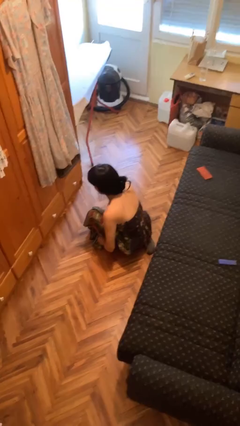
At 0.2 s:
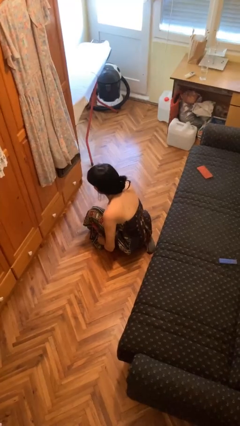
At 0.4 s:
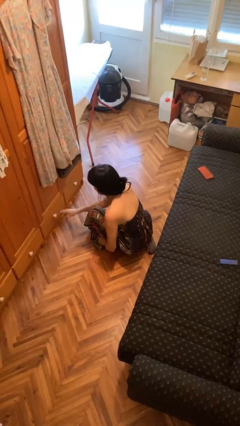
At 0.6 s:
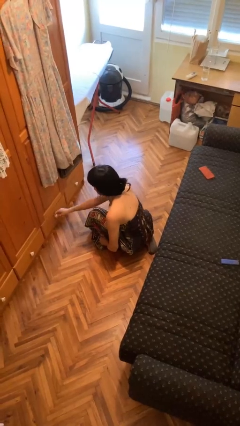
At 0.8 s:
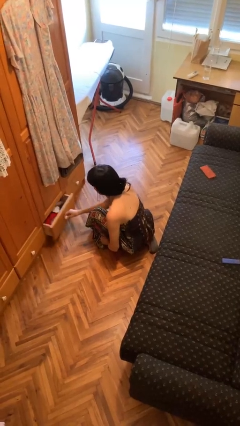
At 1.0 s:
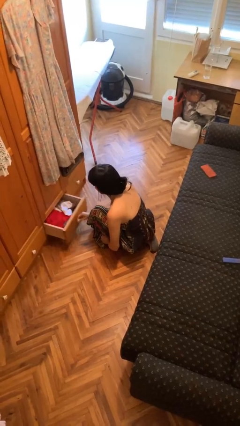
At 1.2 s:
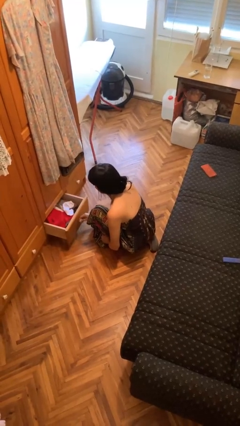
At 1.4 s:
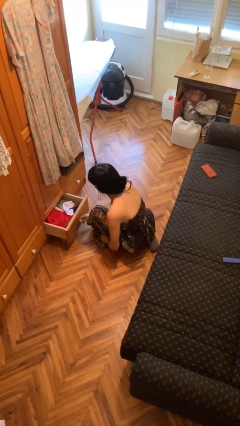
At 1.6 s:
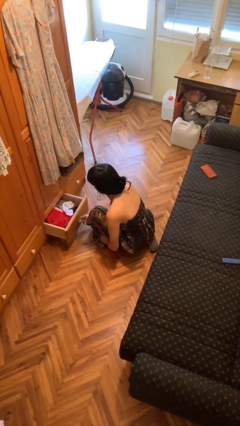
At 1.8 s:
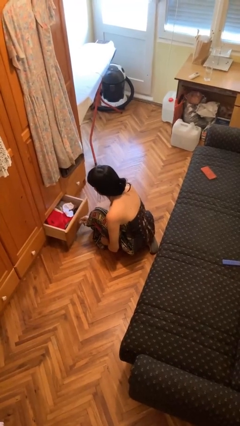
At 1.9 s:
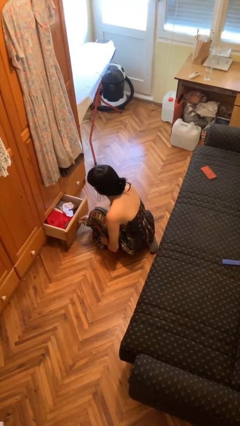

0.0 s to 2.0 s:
person opens dresser drawer

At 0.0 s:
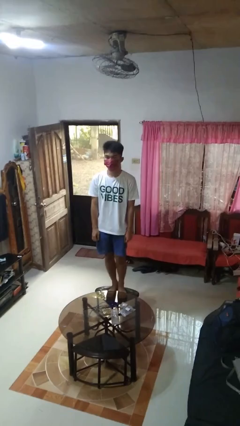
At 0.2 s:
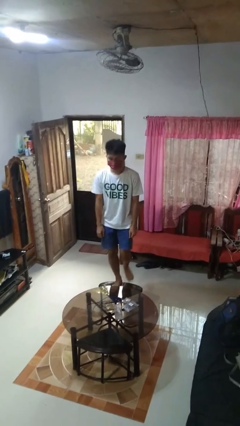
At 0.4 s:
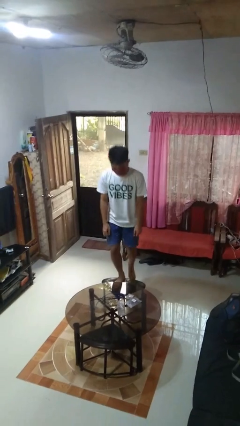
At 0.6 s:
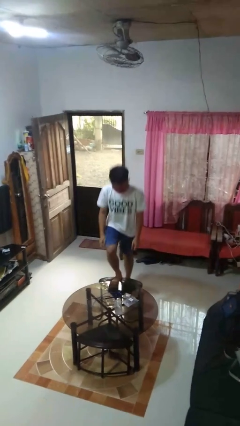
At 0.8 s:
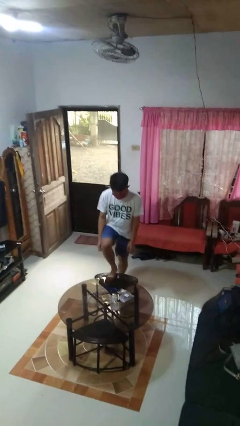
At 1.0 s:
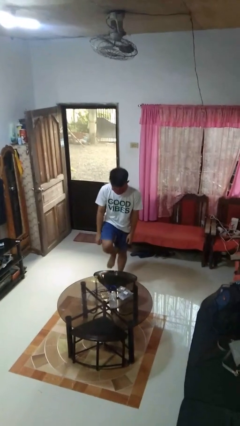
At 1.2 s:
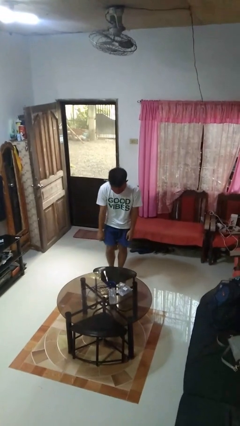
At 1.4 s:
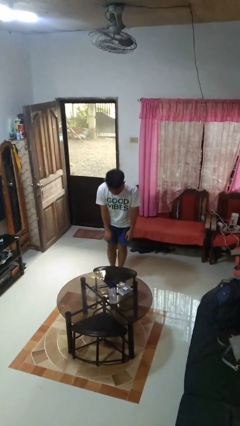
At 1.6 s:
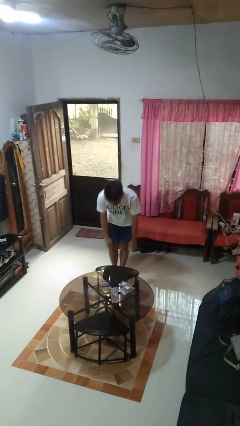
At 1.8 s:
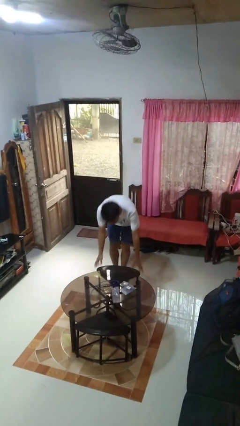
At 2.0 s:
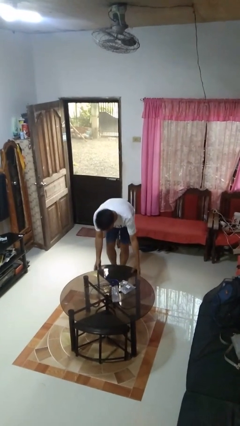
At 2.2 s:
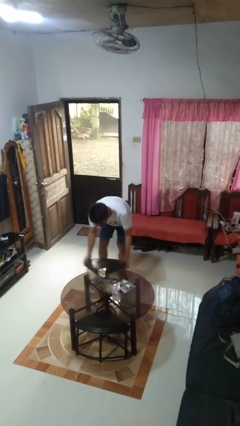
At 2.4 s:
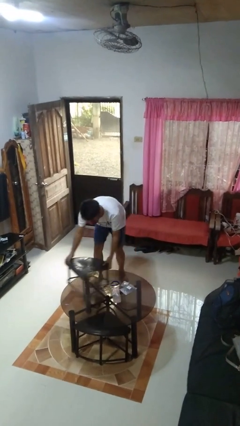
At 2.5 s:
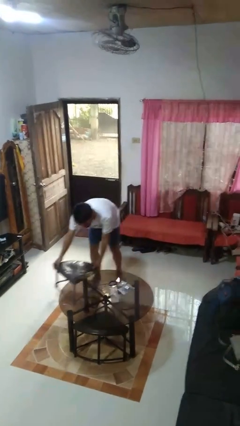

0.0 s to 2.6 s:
person climbs off chair

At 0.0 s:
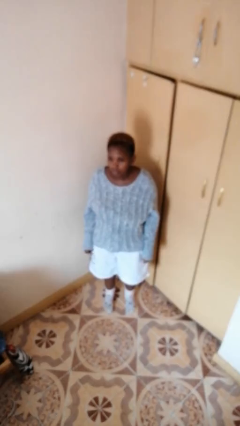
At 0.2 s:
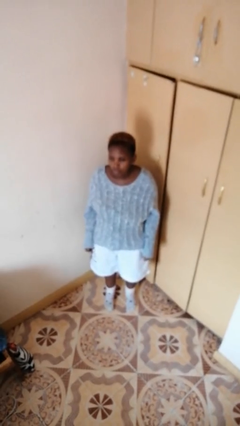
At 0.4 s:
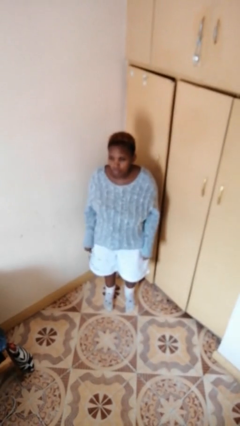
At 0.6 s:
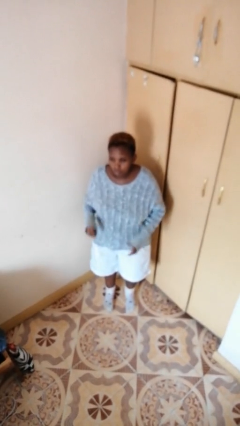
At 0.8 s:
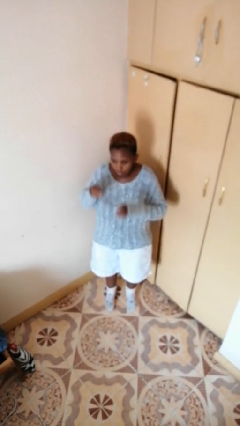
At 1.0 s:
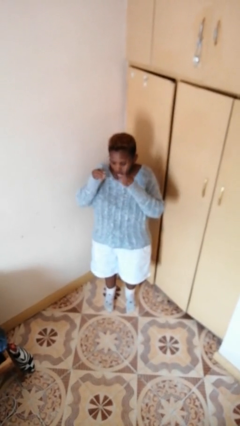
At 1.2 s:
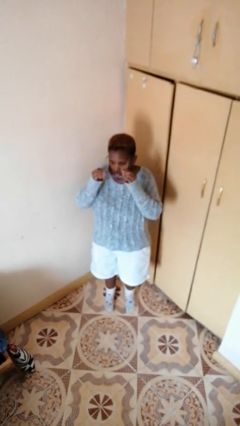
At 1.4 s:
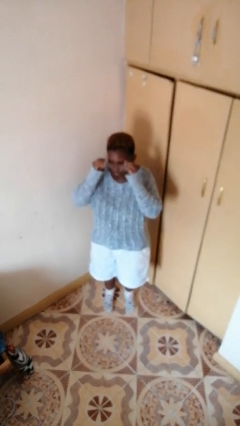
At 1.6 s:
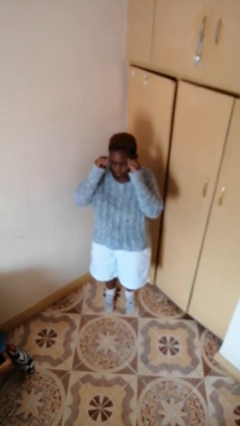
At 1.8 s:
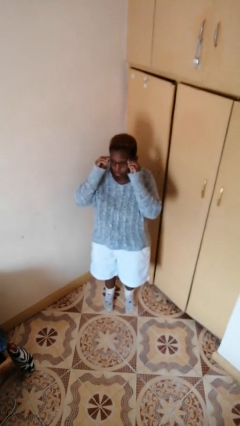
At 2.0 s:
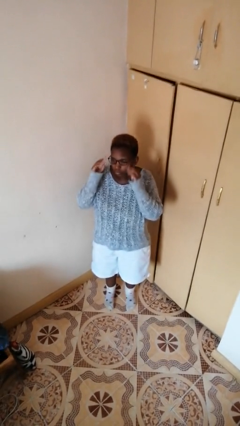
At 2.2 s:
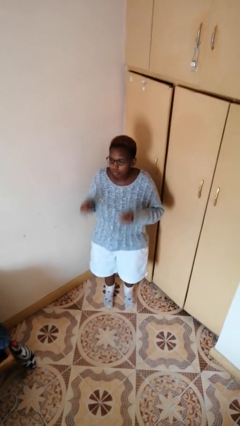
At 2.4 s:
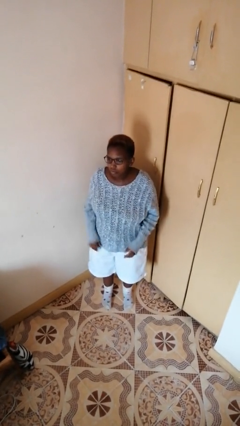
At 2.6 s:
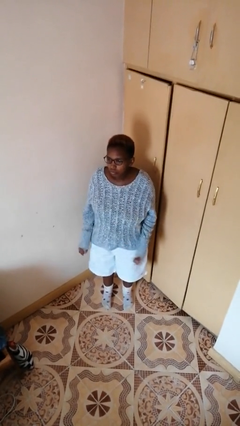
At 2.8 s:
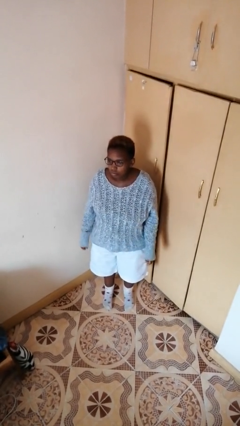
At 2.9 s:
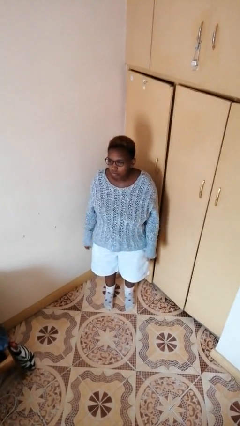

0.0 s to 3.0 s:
person puts on glasses

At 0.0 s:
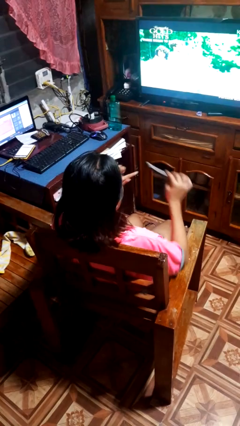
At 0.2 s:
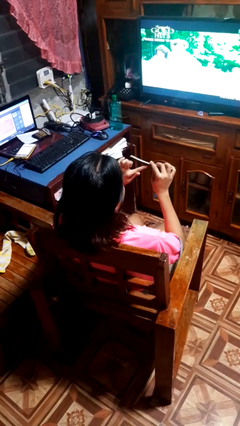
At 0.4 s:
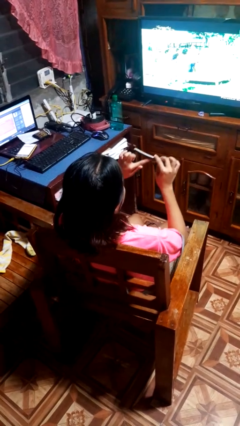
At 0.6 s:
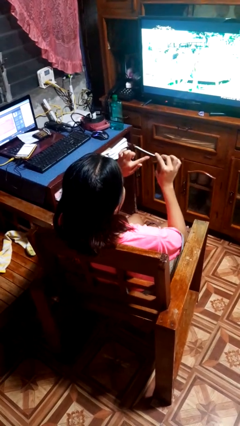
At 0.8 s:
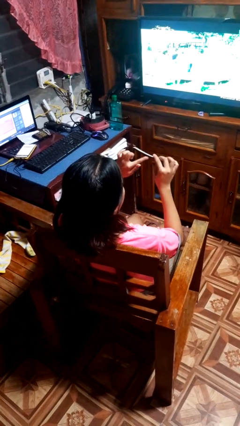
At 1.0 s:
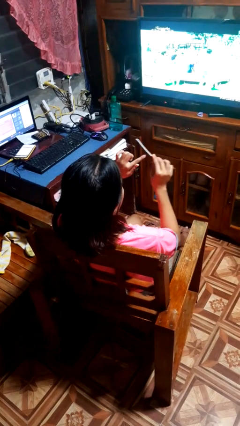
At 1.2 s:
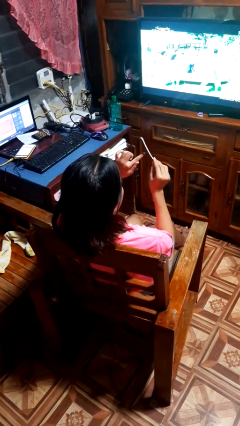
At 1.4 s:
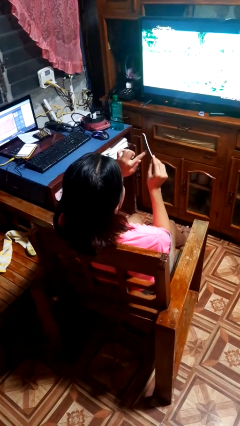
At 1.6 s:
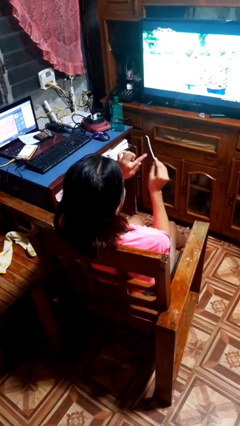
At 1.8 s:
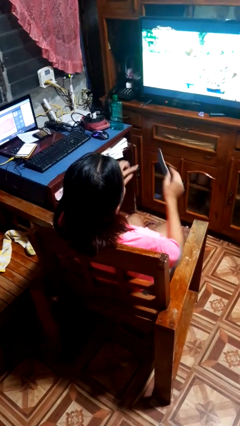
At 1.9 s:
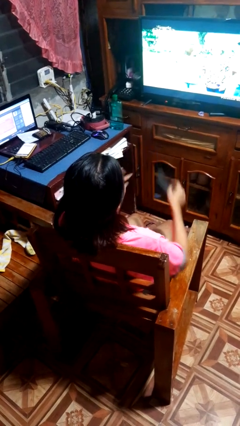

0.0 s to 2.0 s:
person files fingernails

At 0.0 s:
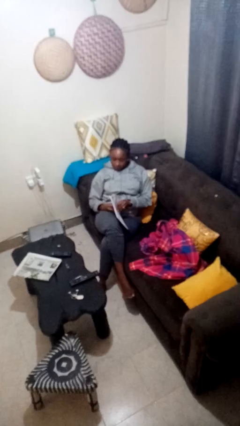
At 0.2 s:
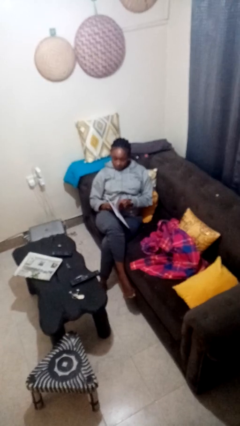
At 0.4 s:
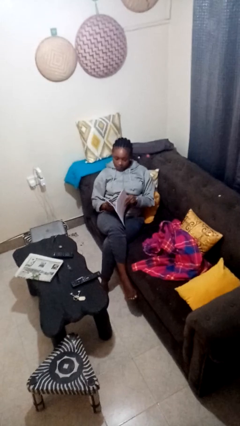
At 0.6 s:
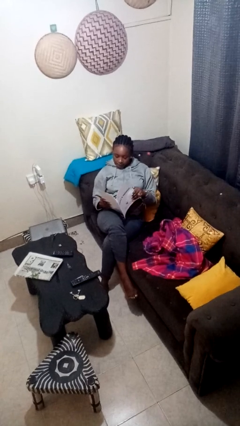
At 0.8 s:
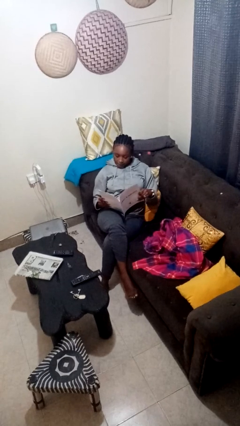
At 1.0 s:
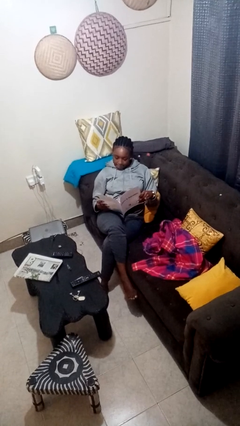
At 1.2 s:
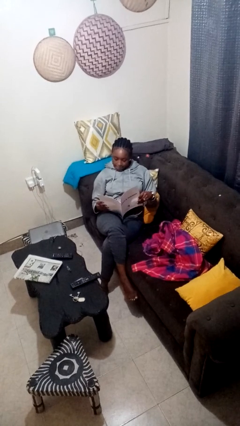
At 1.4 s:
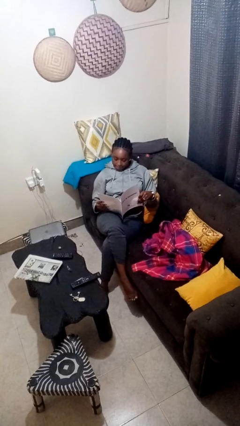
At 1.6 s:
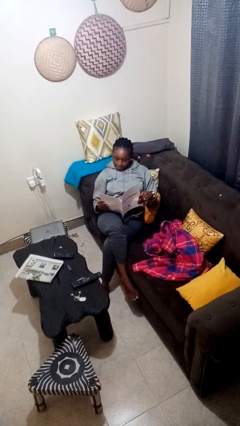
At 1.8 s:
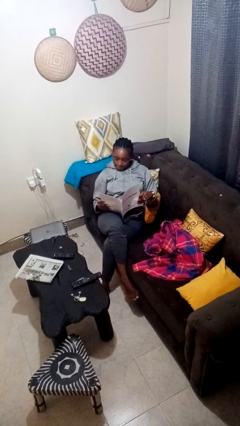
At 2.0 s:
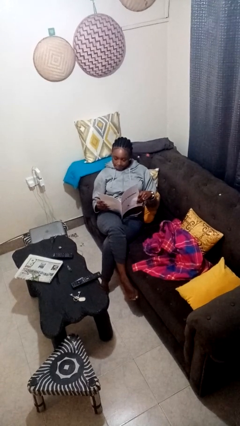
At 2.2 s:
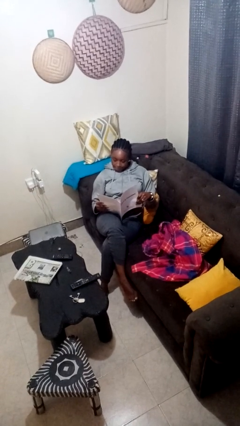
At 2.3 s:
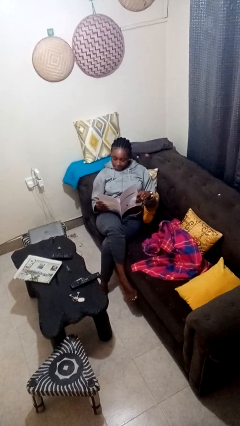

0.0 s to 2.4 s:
person reads magazine

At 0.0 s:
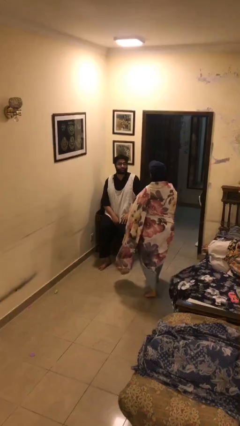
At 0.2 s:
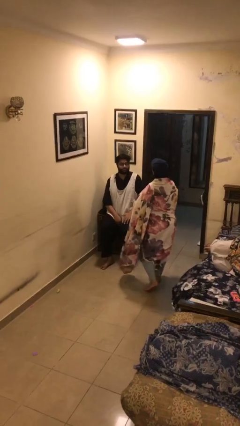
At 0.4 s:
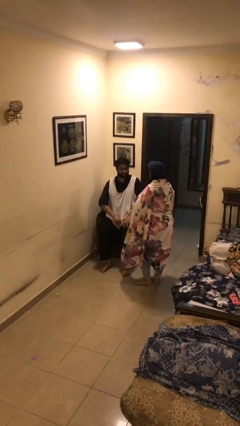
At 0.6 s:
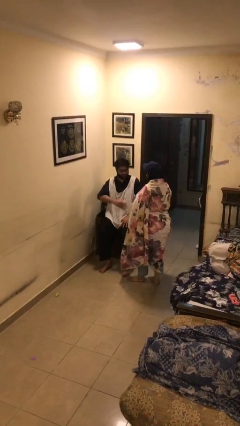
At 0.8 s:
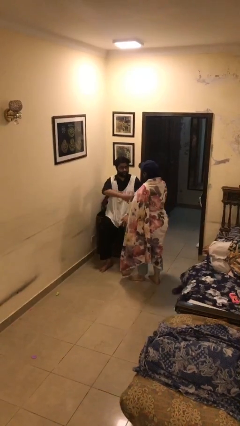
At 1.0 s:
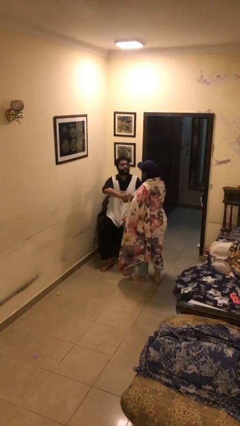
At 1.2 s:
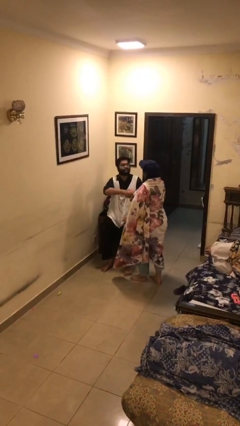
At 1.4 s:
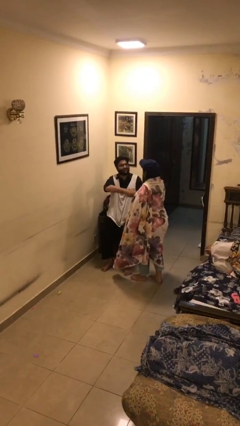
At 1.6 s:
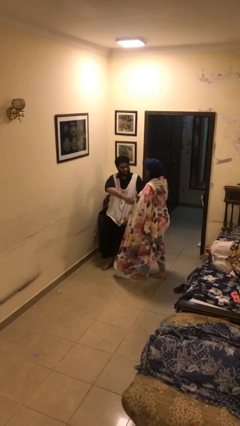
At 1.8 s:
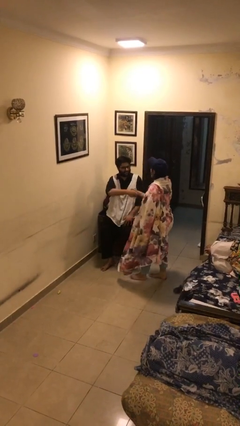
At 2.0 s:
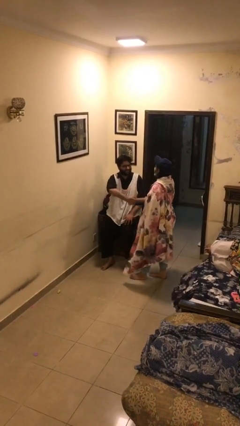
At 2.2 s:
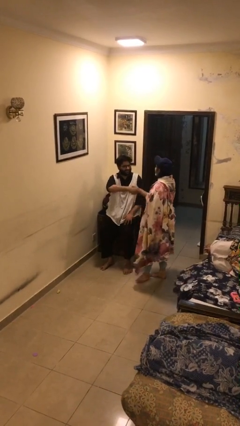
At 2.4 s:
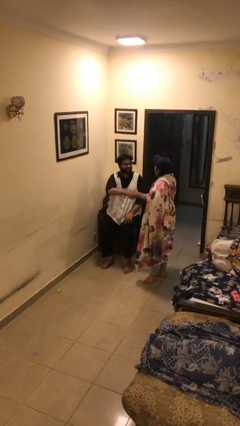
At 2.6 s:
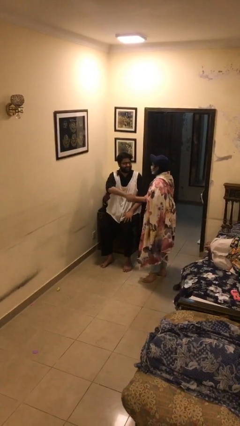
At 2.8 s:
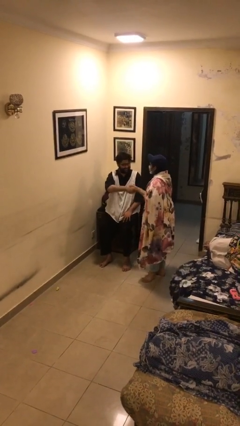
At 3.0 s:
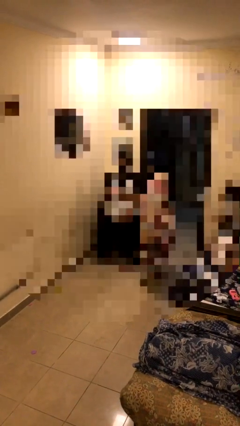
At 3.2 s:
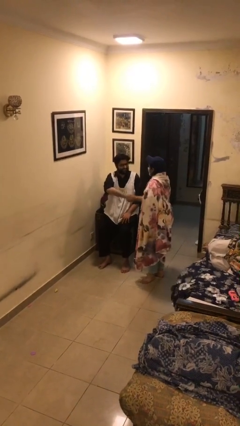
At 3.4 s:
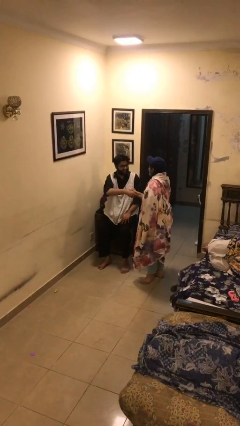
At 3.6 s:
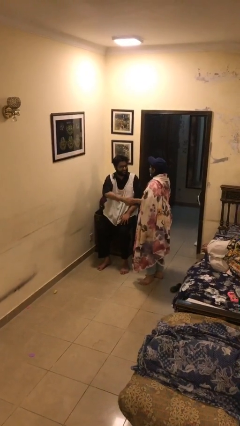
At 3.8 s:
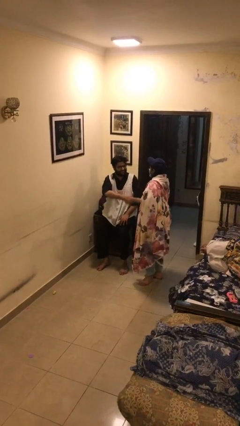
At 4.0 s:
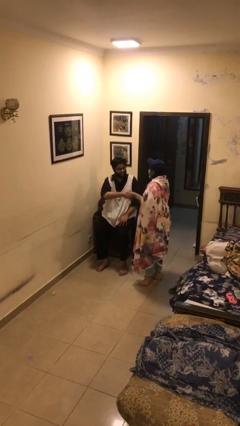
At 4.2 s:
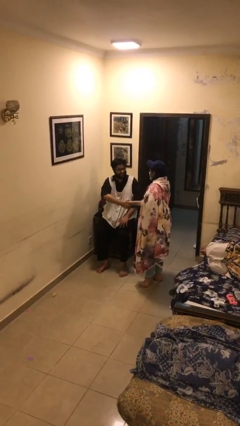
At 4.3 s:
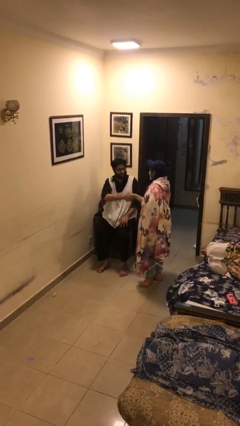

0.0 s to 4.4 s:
person shakes hand

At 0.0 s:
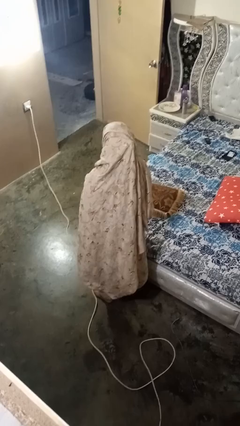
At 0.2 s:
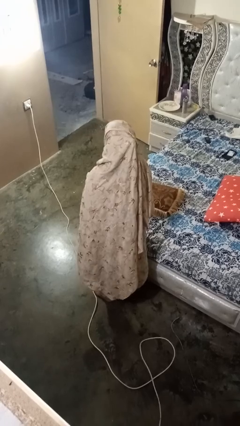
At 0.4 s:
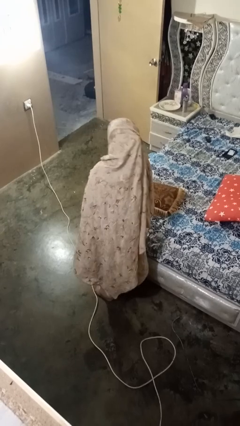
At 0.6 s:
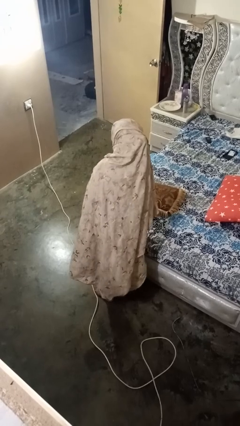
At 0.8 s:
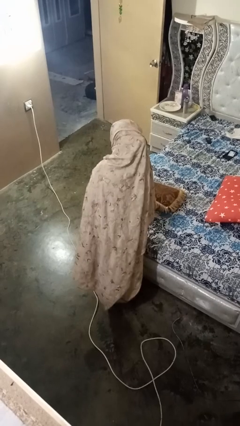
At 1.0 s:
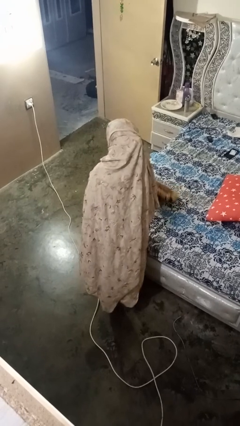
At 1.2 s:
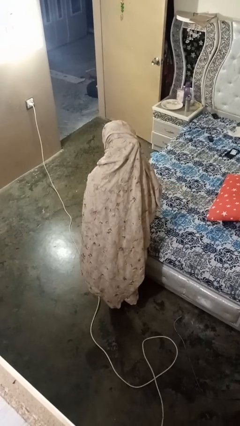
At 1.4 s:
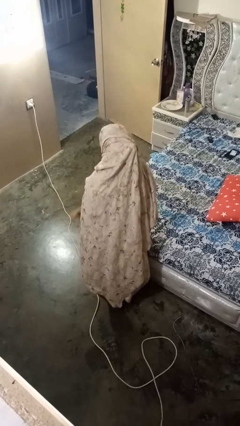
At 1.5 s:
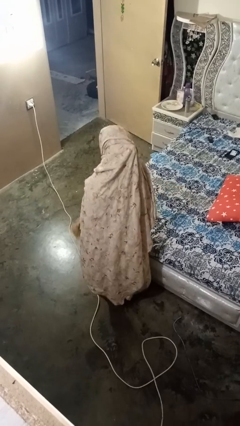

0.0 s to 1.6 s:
person picks up object from bed
